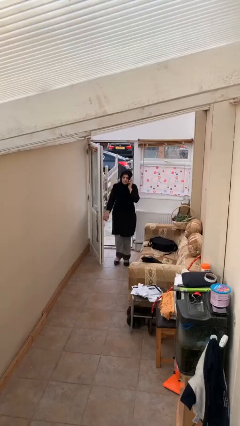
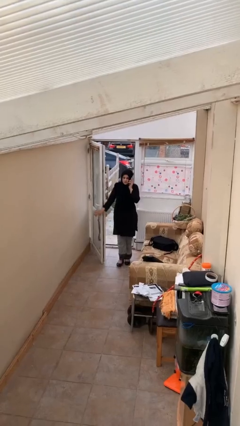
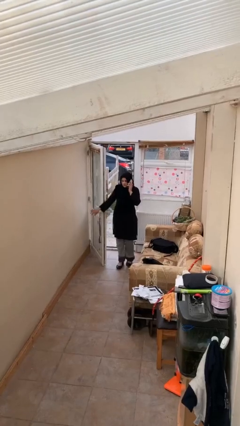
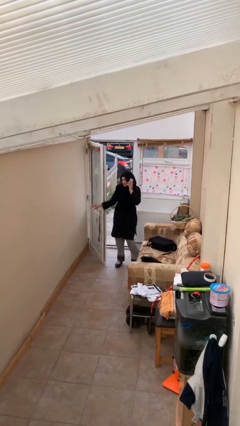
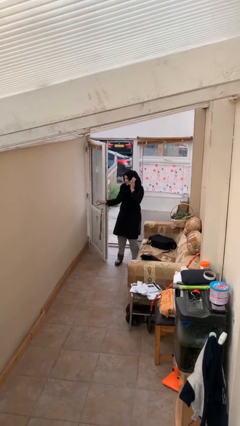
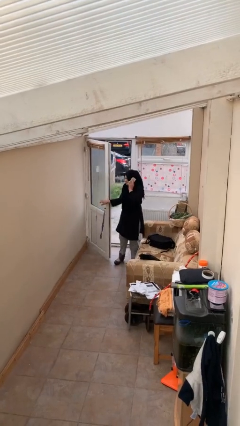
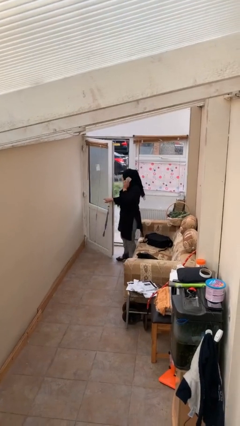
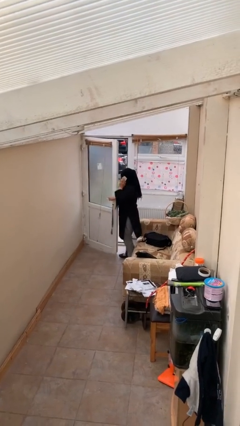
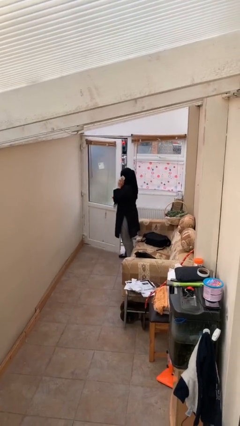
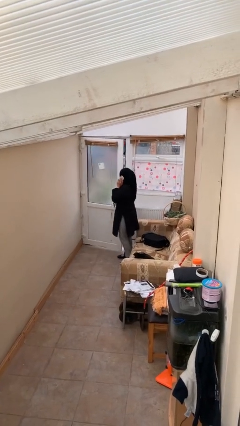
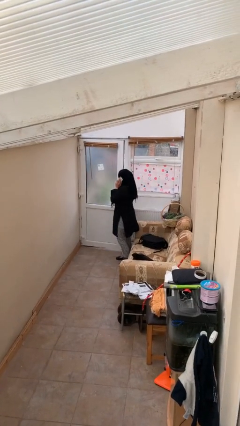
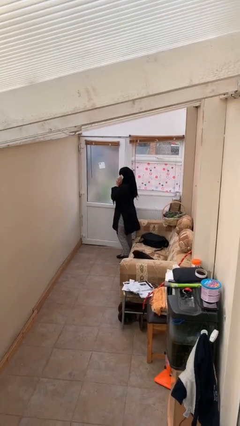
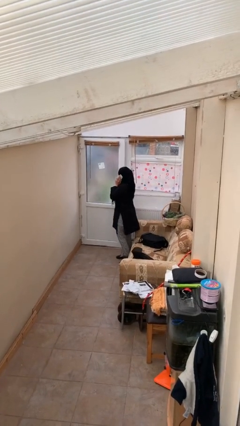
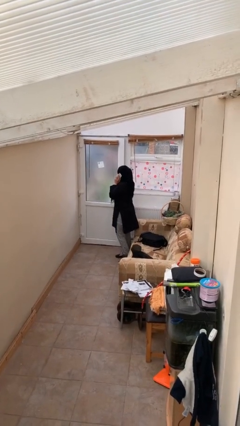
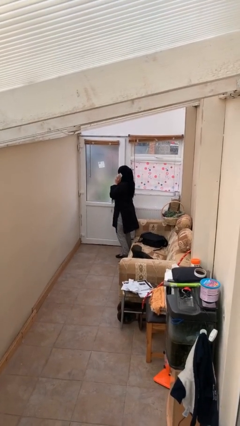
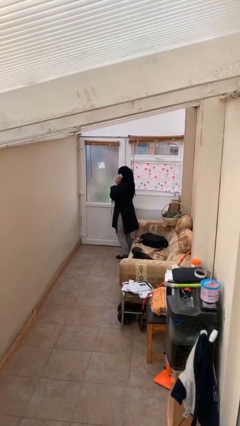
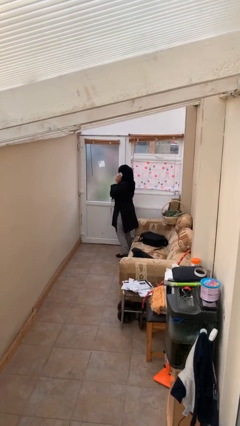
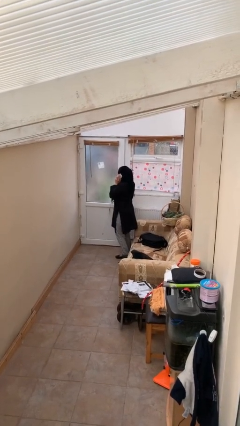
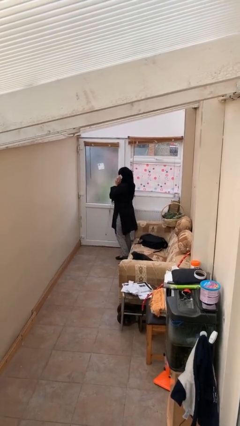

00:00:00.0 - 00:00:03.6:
person closes facility door

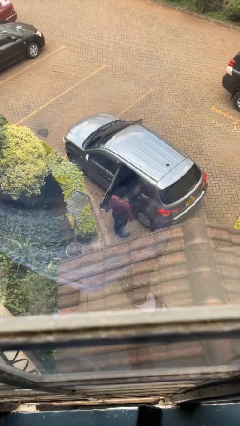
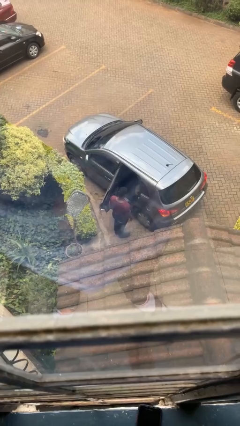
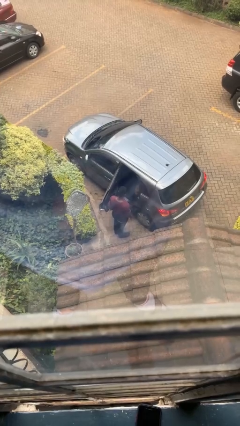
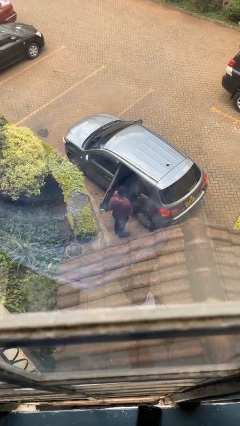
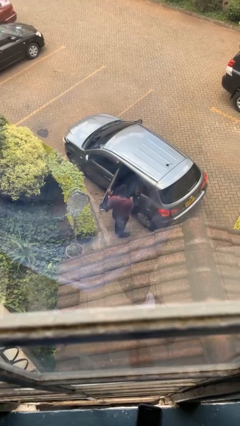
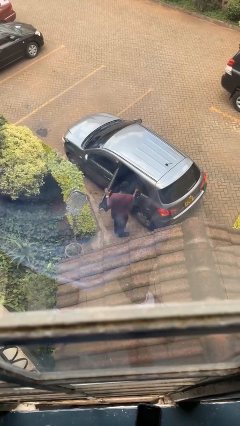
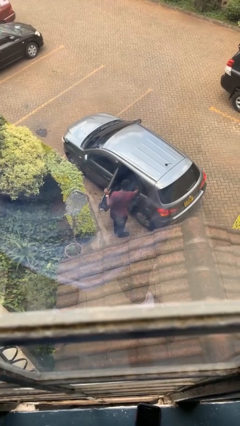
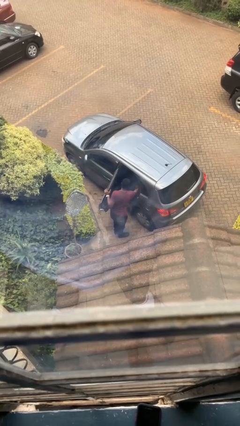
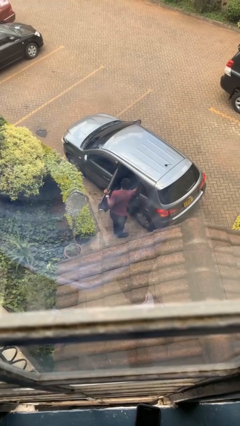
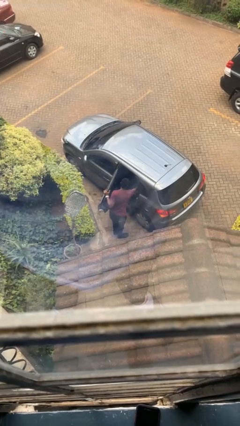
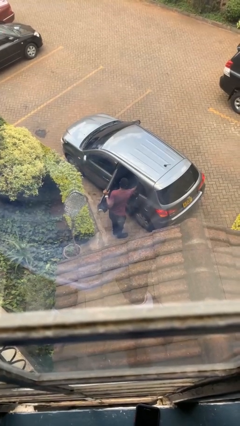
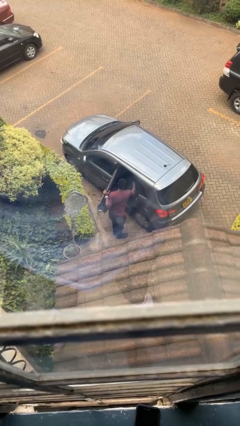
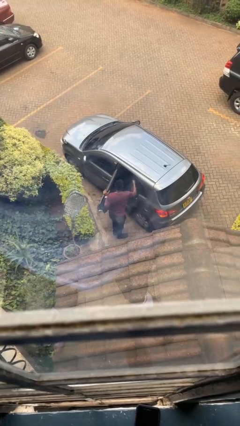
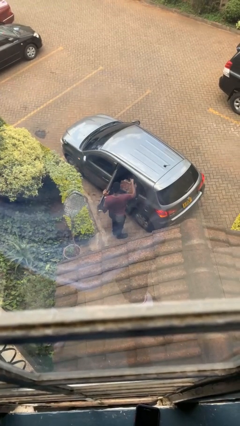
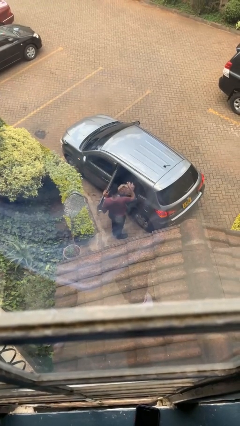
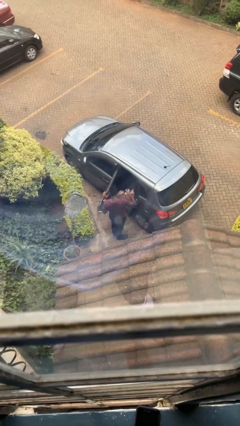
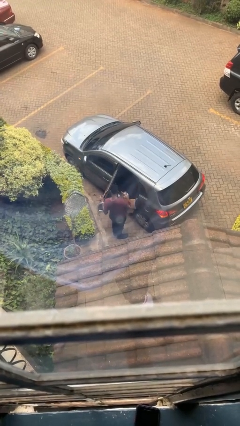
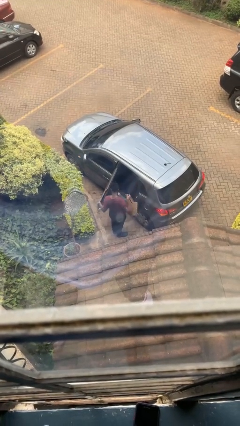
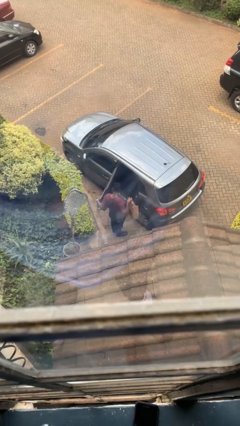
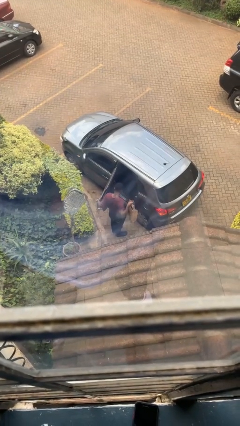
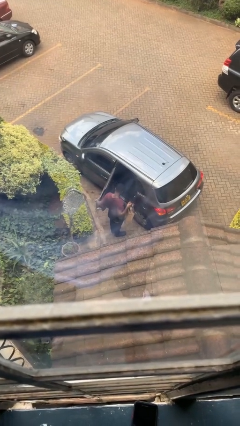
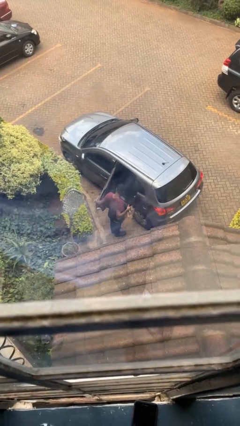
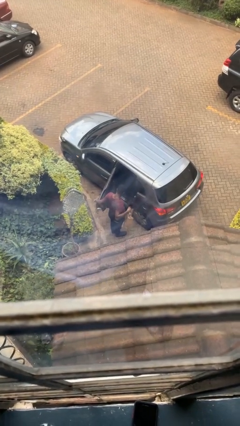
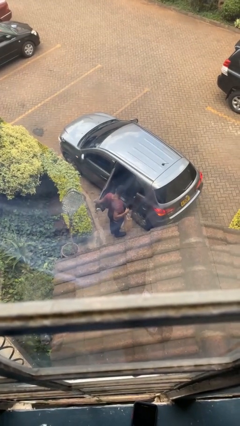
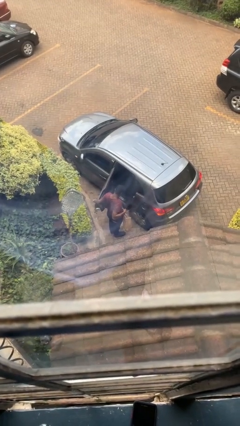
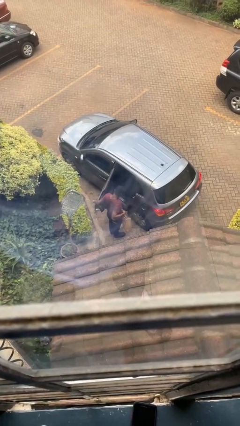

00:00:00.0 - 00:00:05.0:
person unloads car

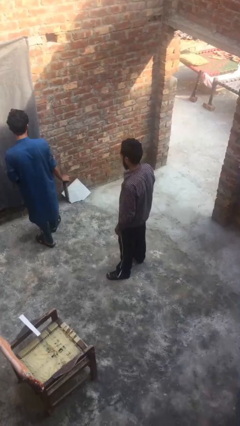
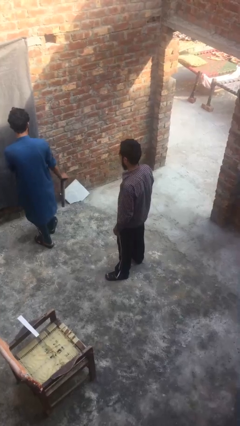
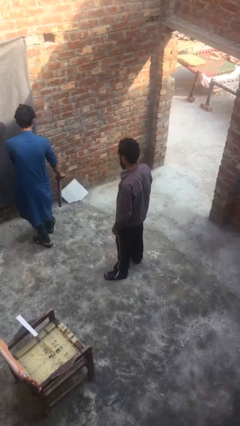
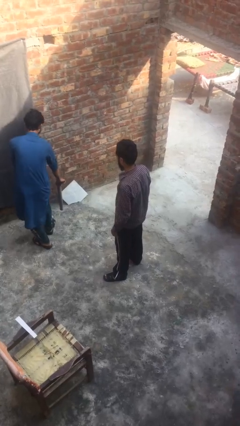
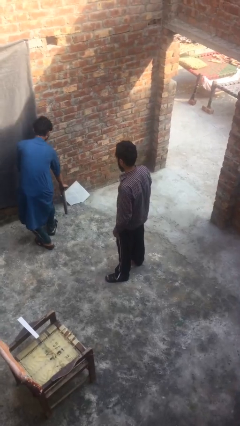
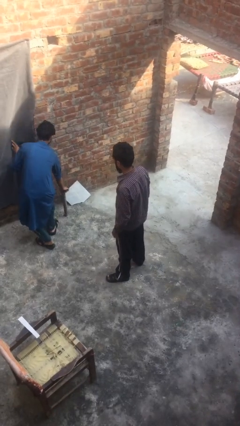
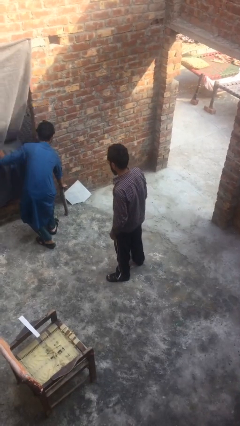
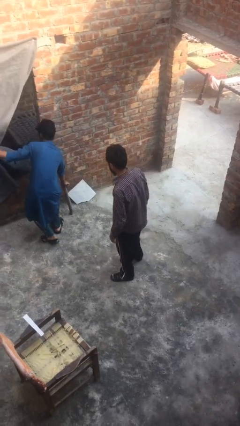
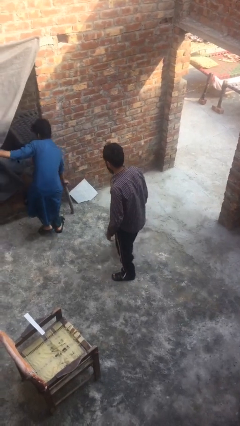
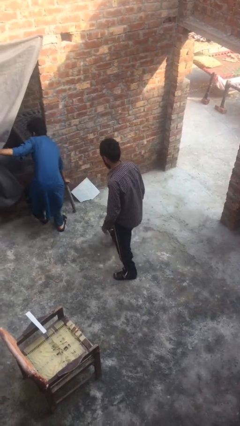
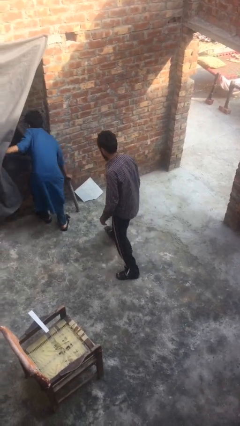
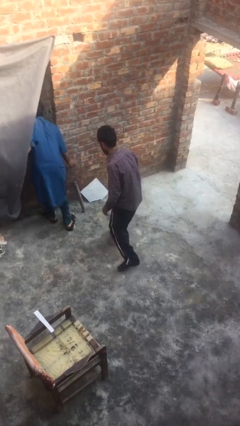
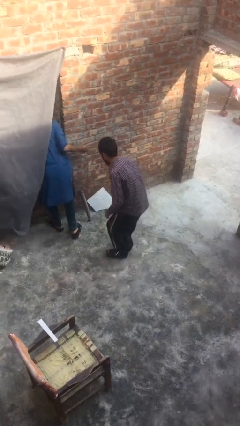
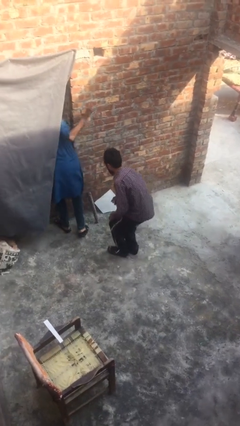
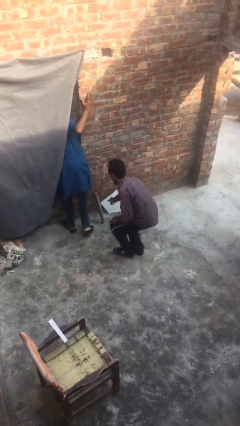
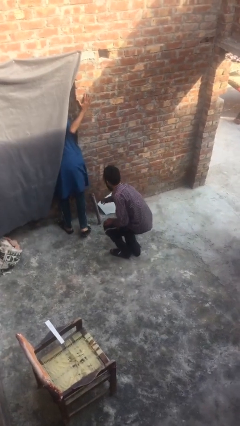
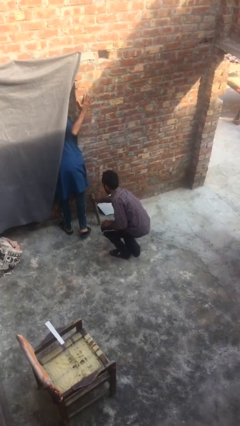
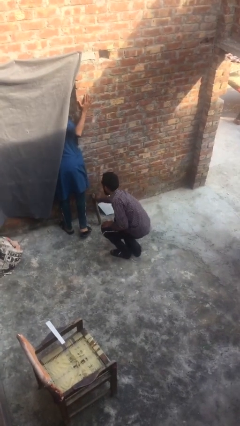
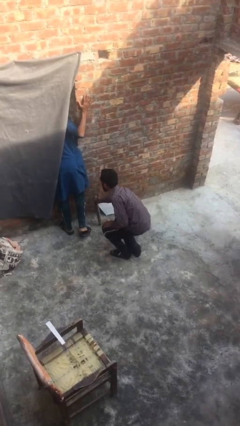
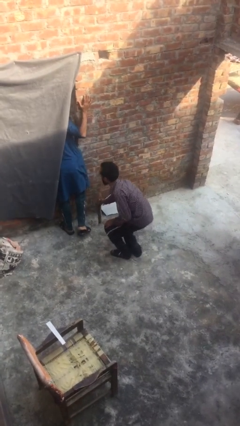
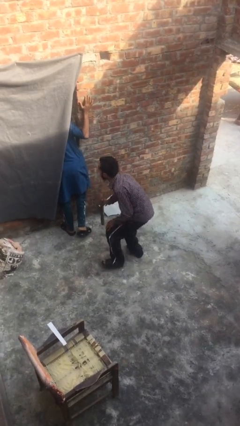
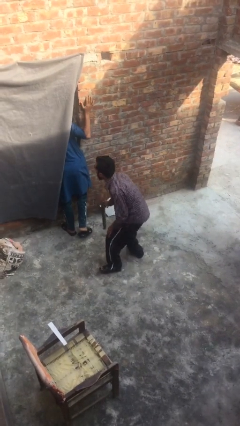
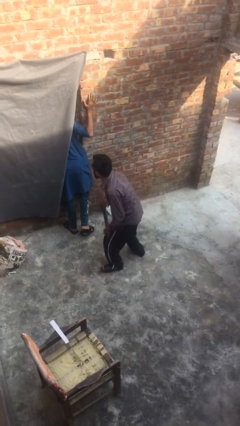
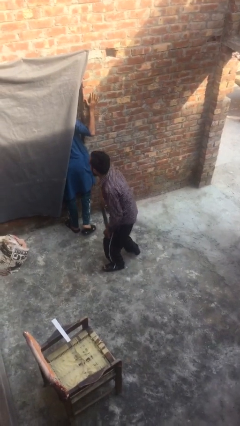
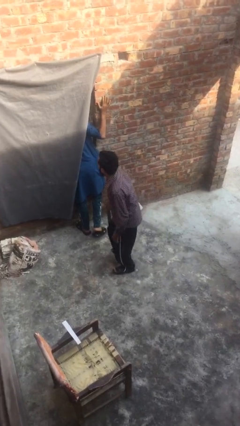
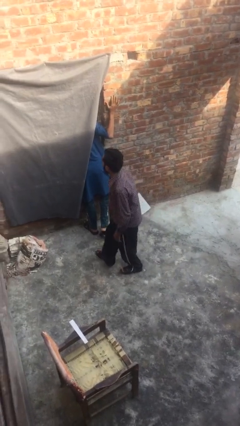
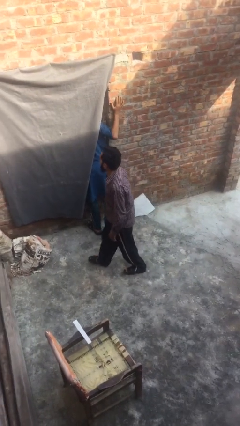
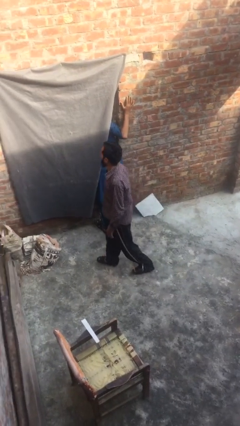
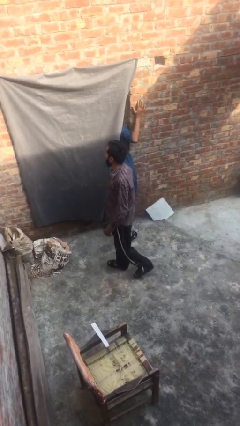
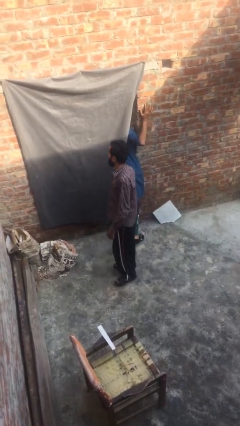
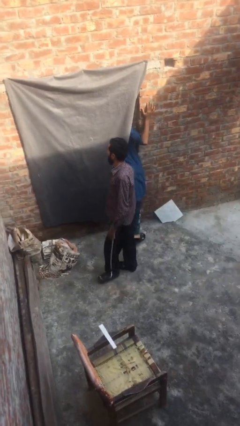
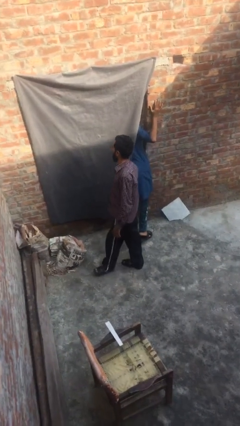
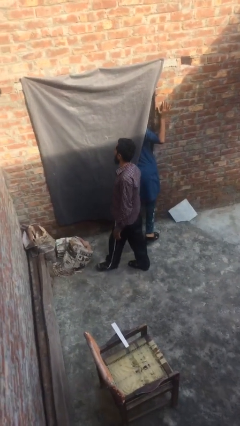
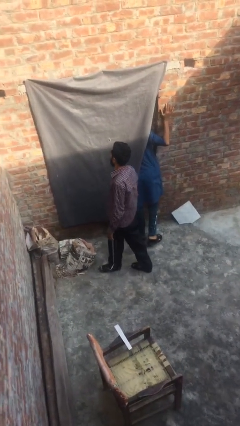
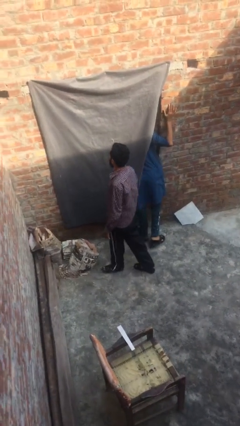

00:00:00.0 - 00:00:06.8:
person steals object from person

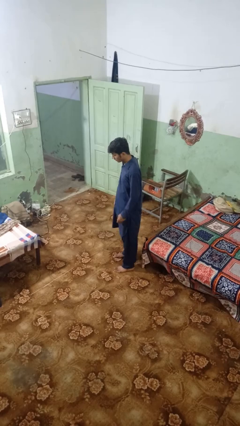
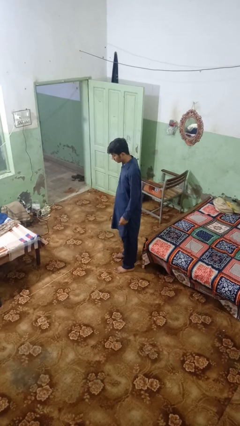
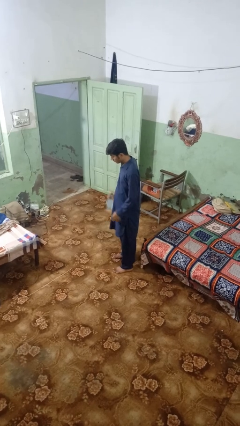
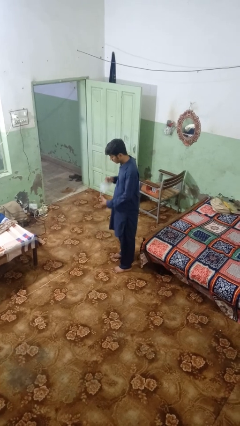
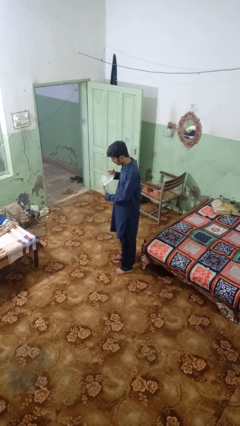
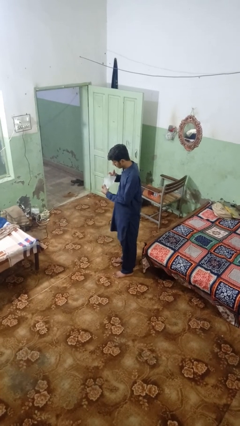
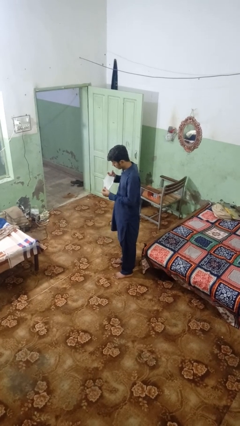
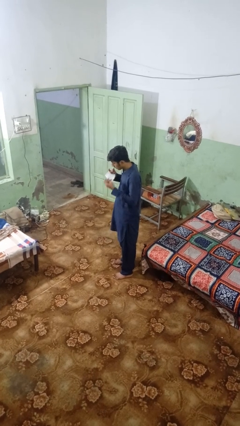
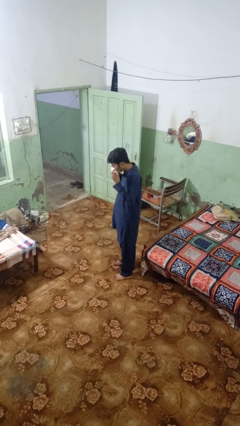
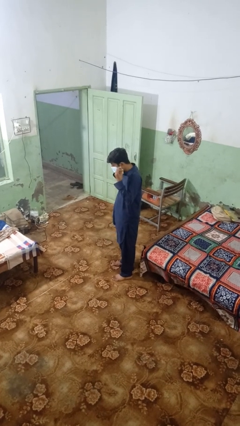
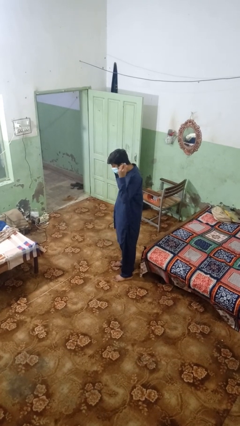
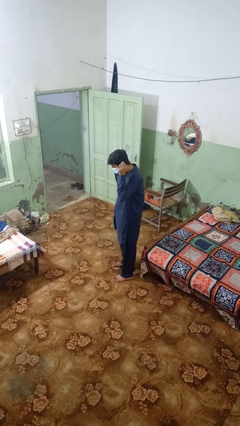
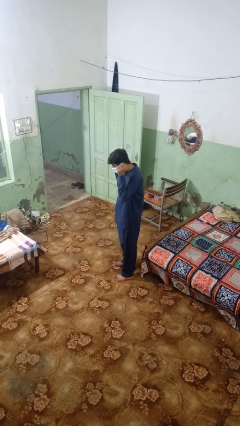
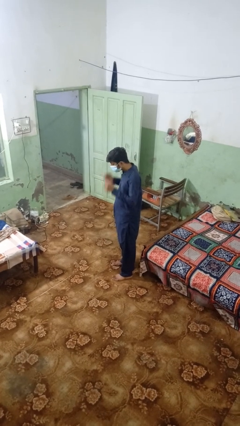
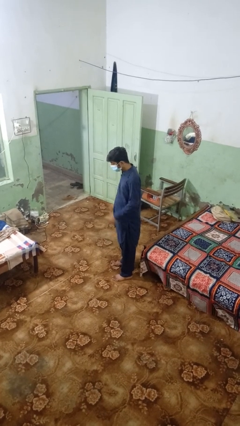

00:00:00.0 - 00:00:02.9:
person puts on facemask

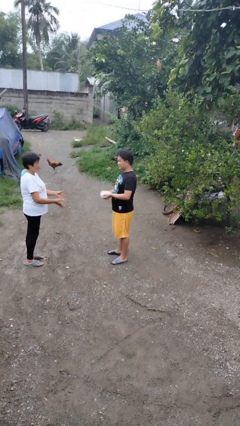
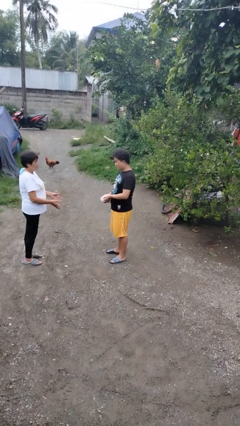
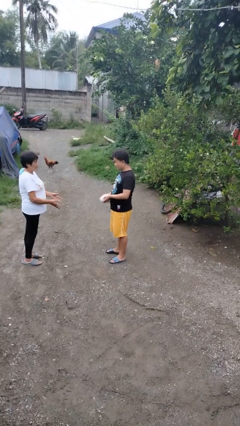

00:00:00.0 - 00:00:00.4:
person catches object from person
